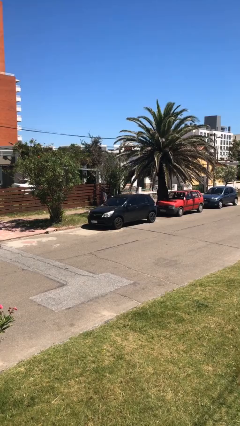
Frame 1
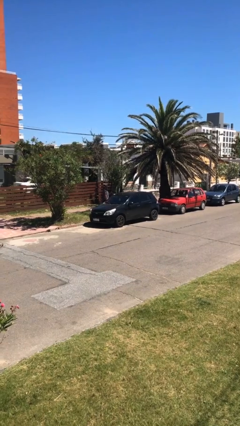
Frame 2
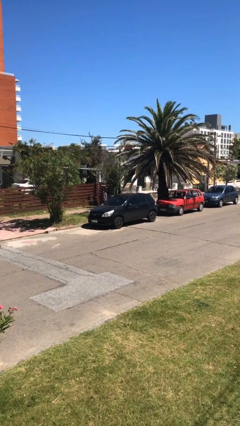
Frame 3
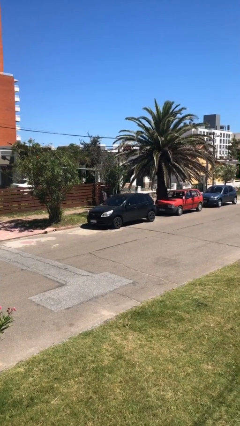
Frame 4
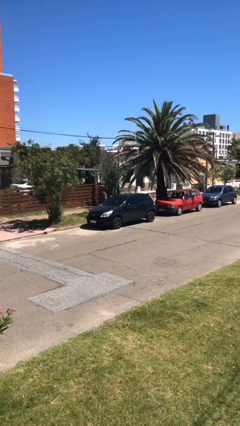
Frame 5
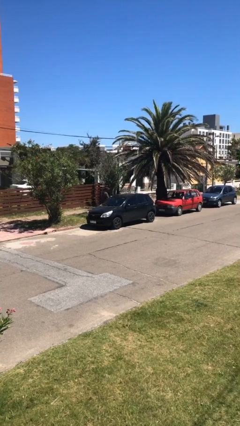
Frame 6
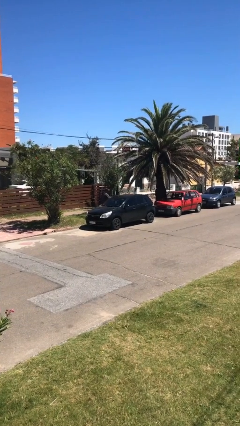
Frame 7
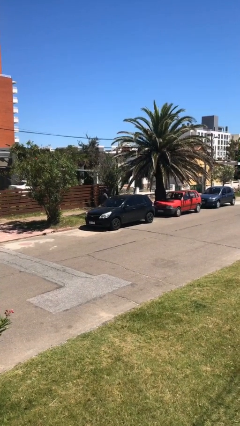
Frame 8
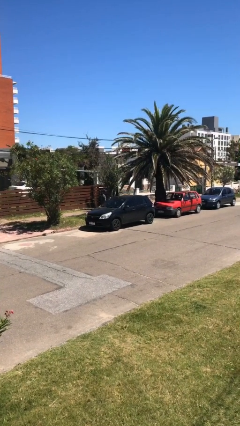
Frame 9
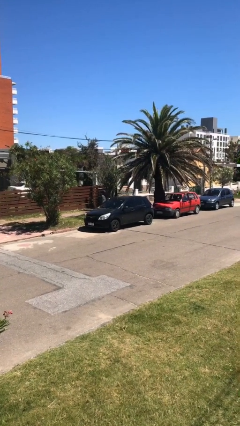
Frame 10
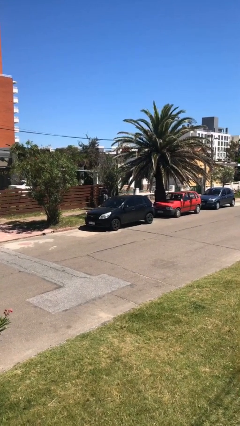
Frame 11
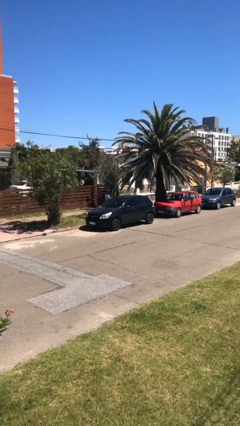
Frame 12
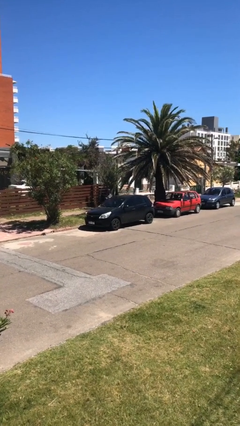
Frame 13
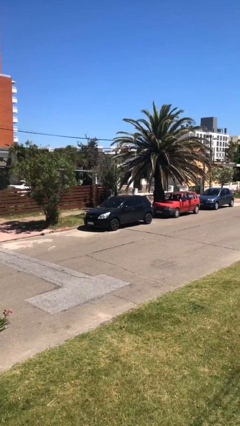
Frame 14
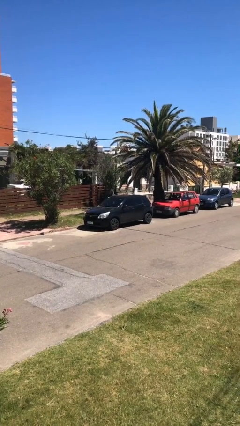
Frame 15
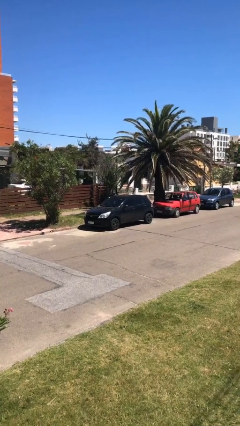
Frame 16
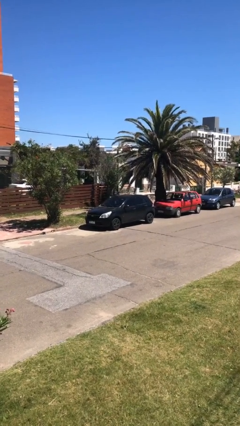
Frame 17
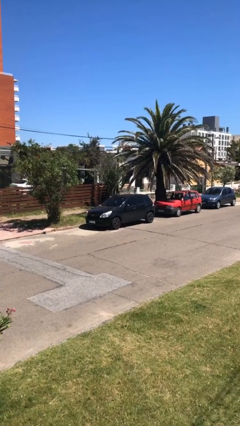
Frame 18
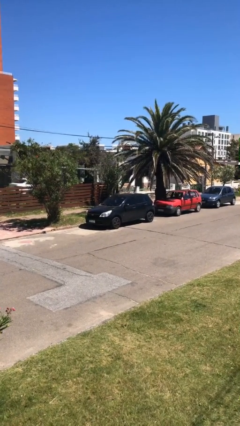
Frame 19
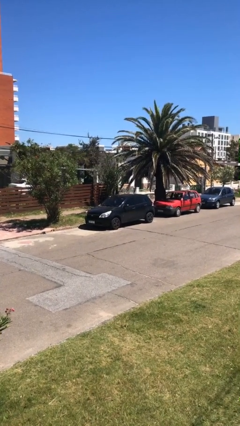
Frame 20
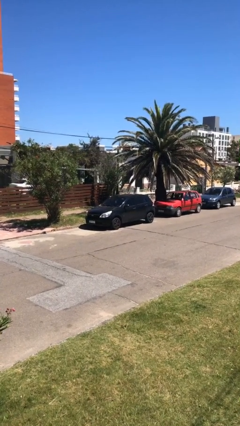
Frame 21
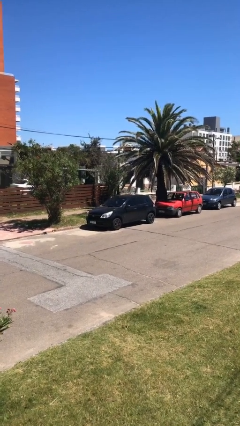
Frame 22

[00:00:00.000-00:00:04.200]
car picks up person

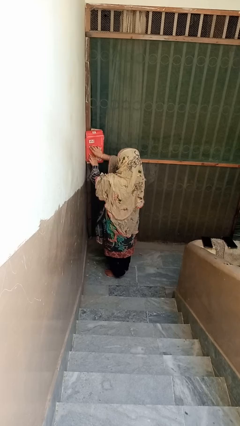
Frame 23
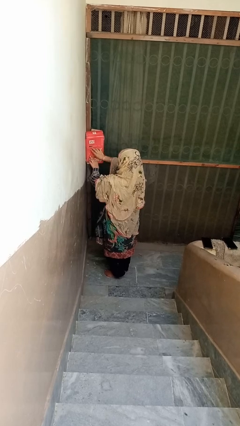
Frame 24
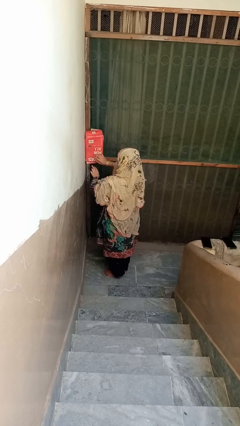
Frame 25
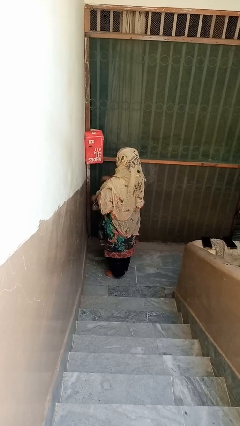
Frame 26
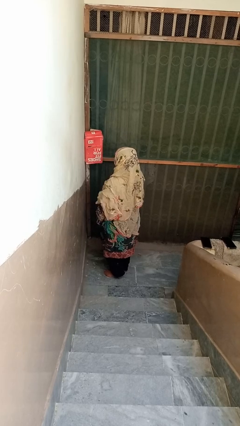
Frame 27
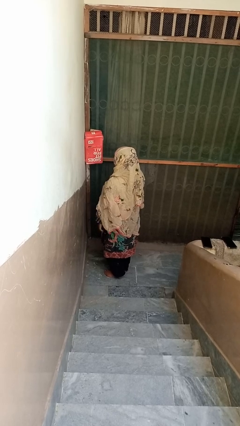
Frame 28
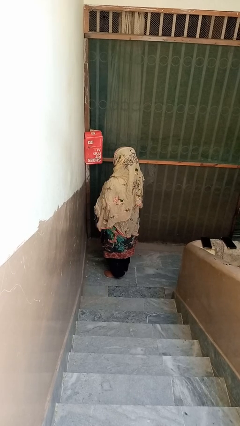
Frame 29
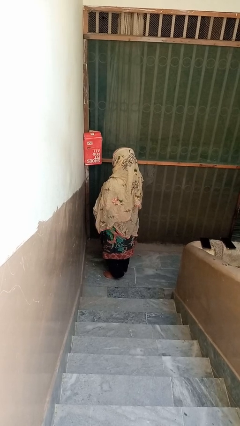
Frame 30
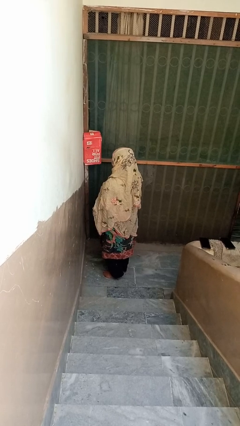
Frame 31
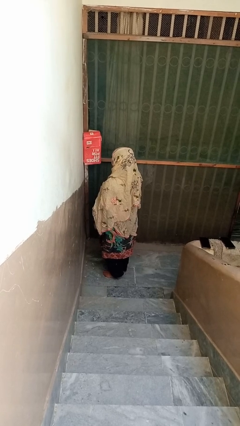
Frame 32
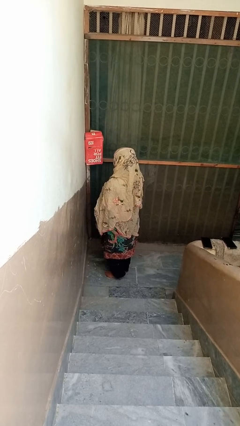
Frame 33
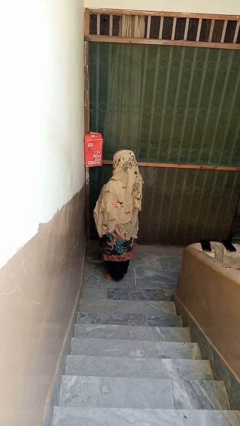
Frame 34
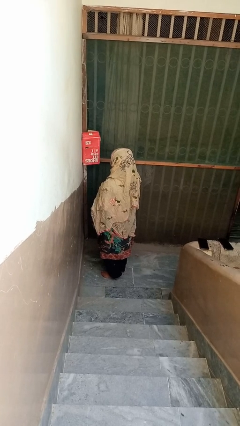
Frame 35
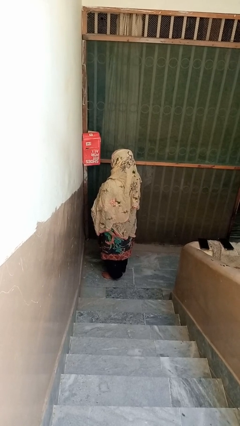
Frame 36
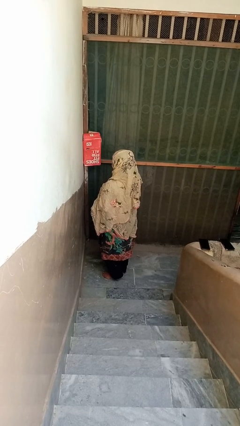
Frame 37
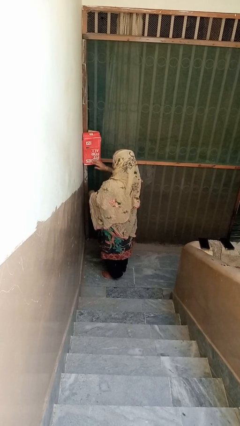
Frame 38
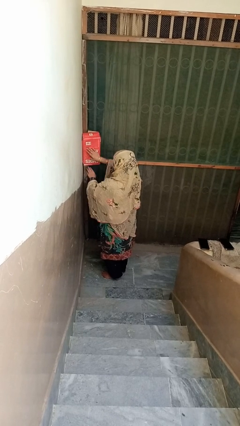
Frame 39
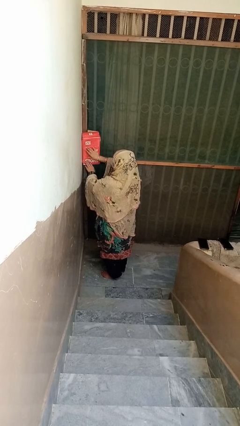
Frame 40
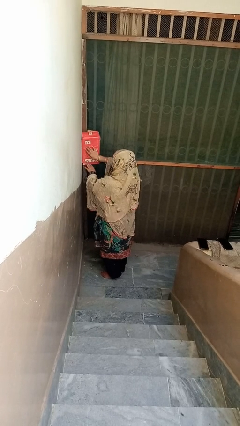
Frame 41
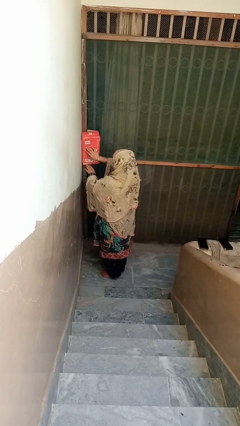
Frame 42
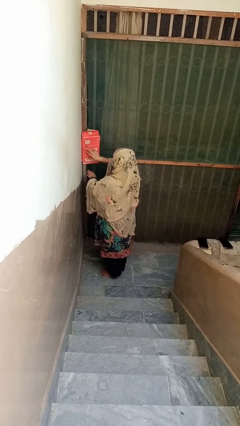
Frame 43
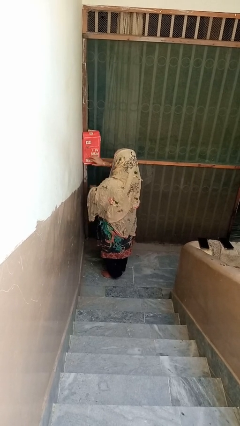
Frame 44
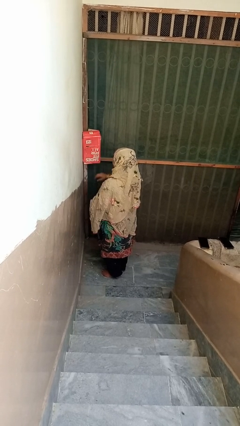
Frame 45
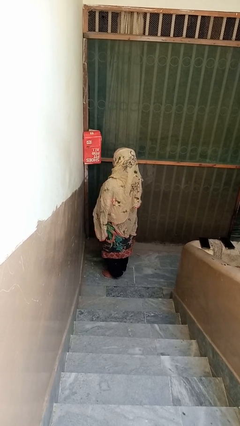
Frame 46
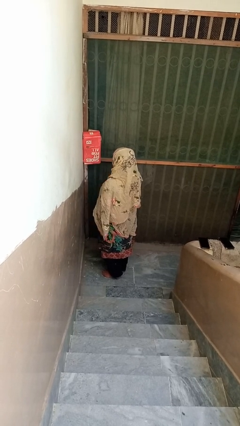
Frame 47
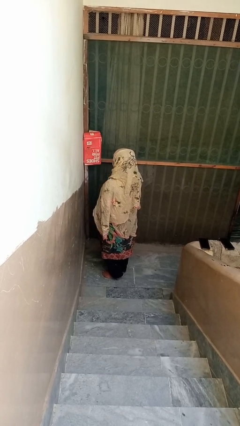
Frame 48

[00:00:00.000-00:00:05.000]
person closes mailbox

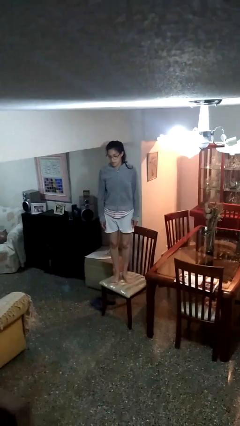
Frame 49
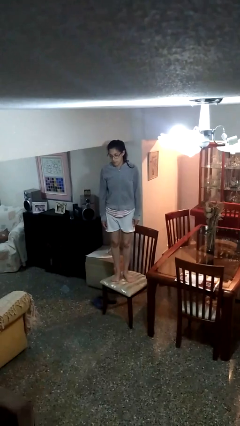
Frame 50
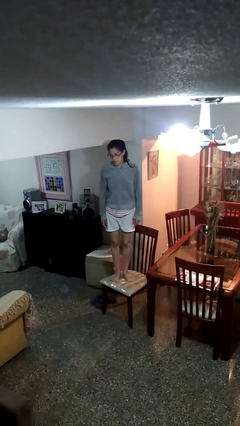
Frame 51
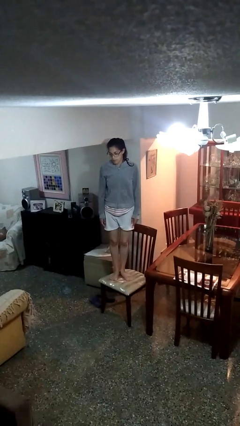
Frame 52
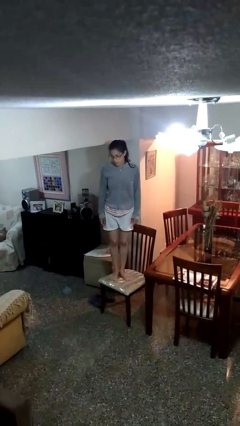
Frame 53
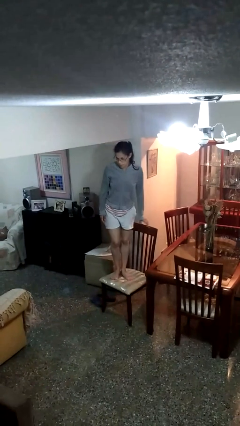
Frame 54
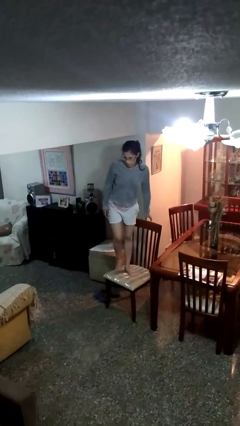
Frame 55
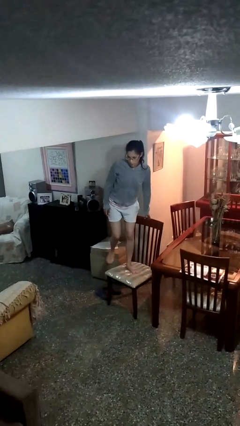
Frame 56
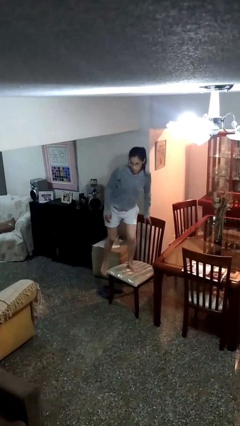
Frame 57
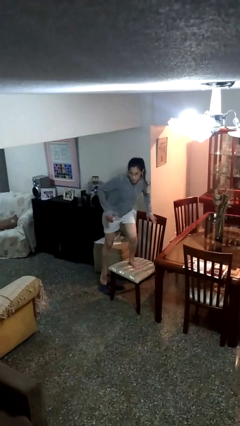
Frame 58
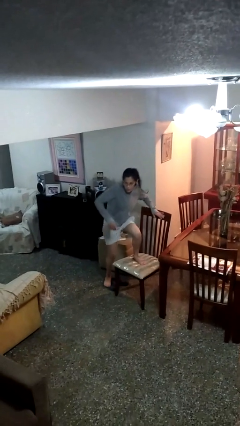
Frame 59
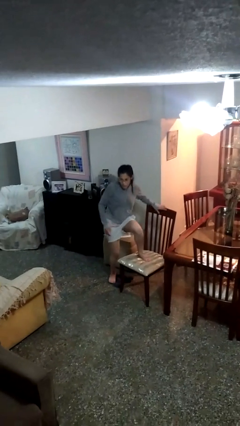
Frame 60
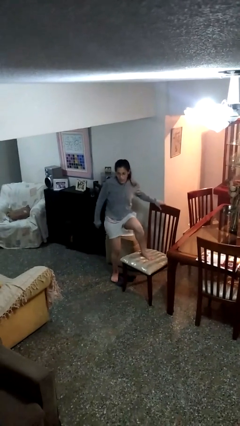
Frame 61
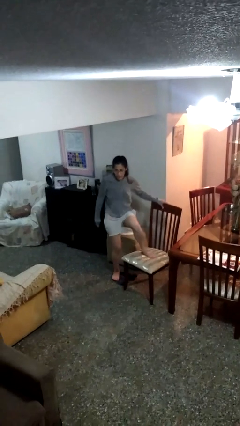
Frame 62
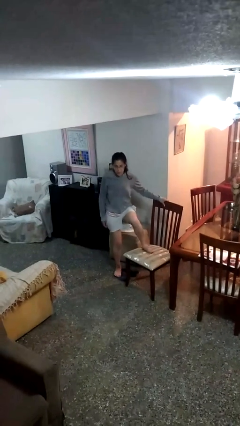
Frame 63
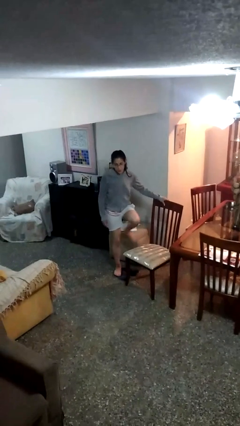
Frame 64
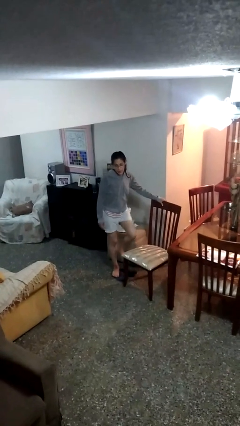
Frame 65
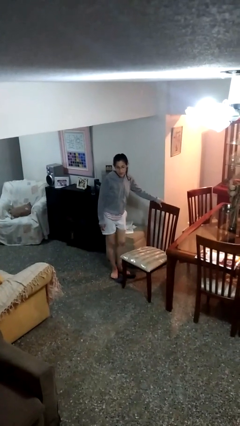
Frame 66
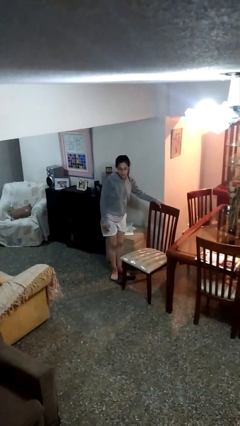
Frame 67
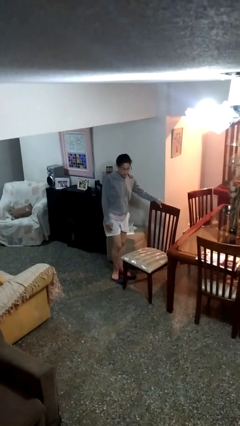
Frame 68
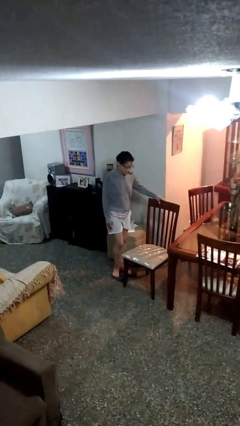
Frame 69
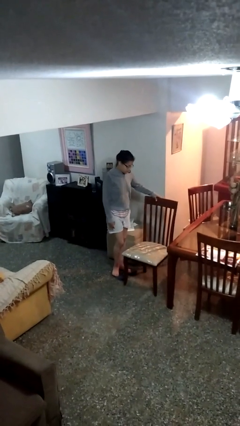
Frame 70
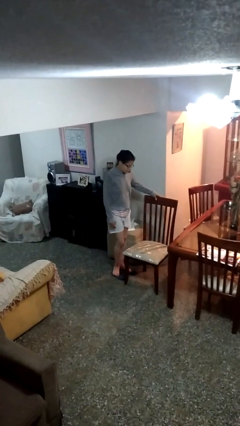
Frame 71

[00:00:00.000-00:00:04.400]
person climbs off chair

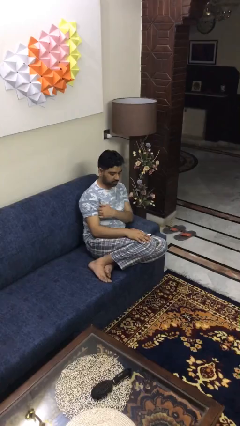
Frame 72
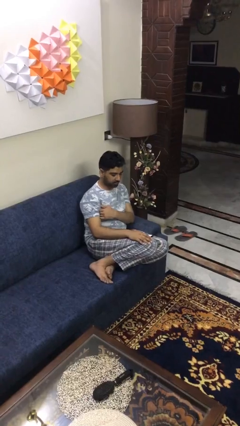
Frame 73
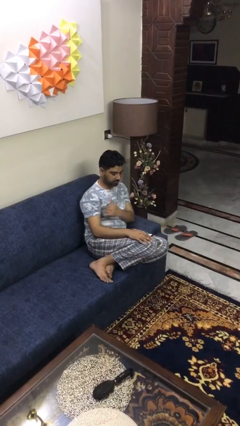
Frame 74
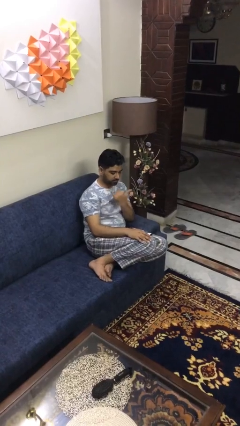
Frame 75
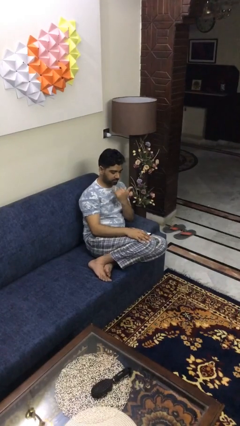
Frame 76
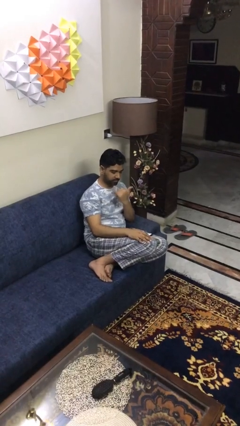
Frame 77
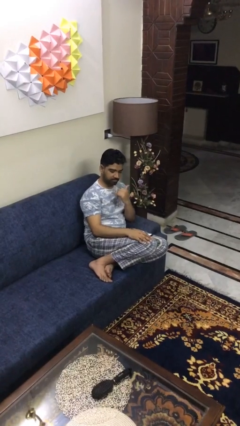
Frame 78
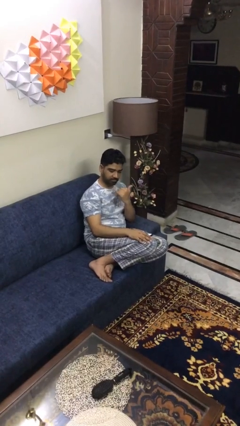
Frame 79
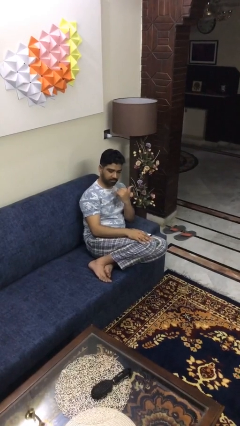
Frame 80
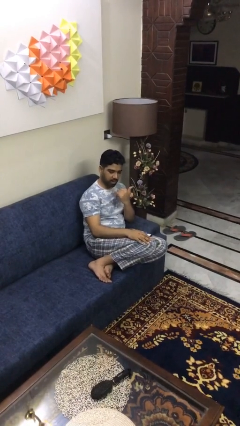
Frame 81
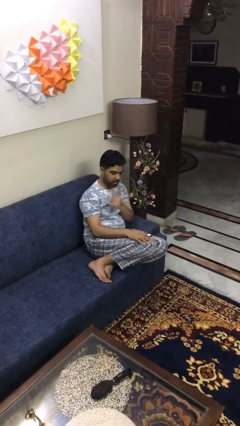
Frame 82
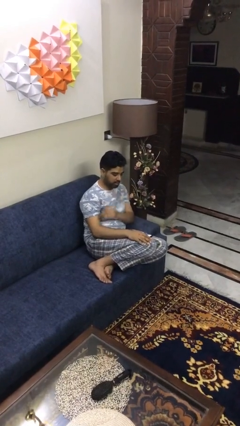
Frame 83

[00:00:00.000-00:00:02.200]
person gestures hang loose

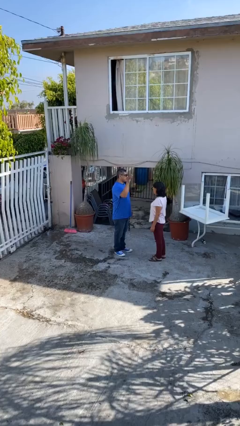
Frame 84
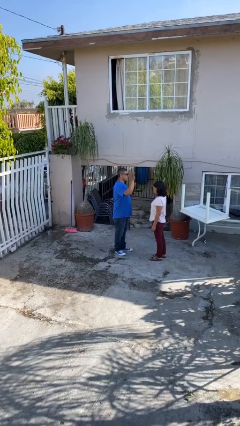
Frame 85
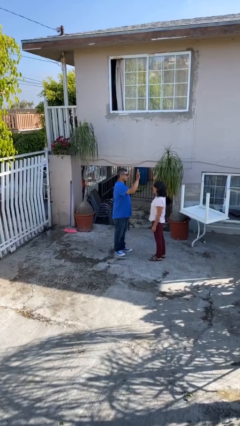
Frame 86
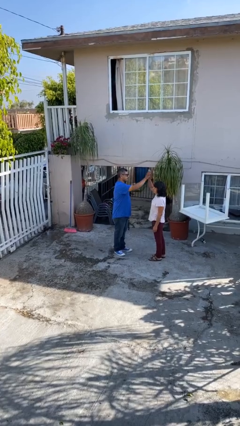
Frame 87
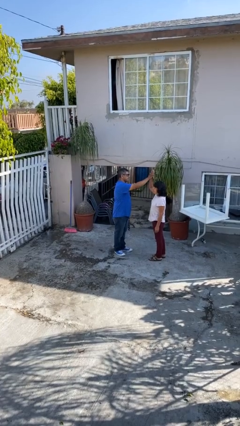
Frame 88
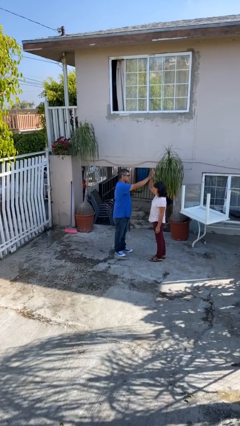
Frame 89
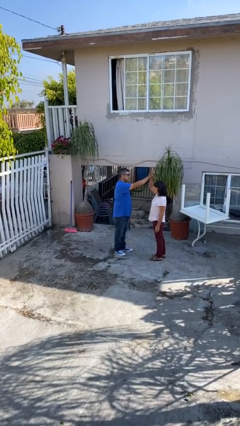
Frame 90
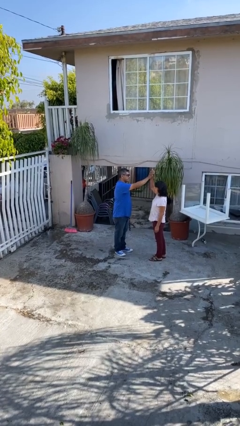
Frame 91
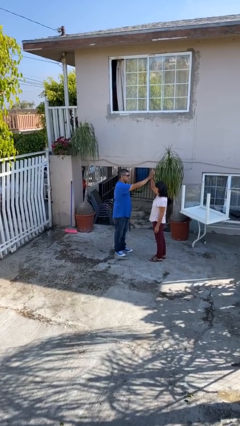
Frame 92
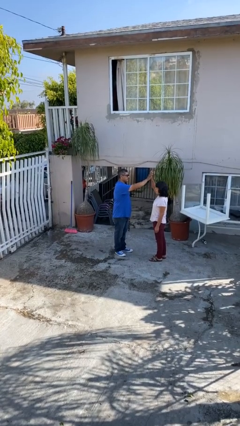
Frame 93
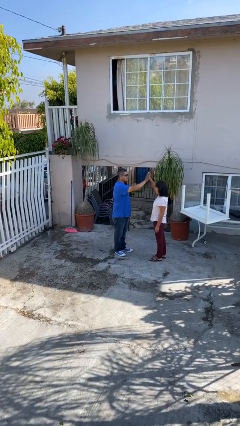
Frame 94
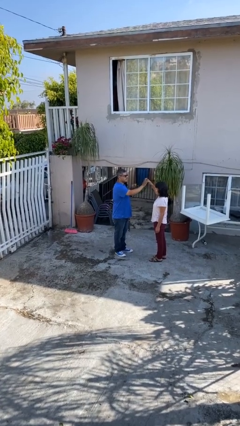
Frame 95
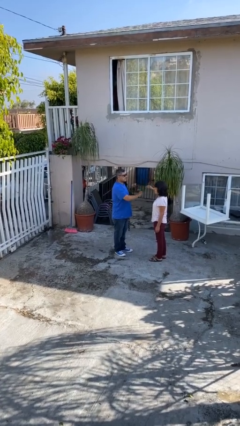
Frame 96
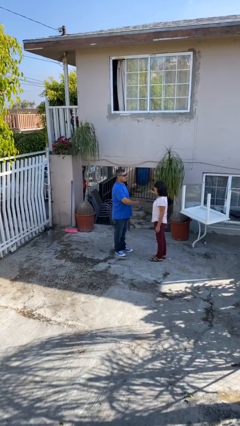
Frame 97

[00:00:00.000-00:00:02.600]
person highfives hand
